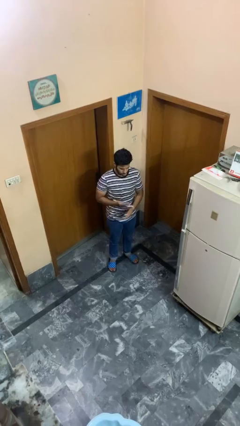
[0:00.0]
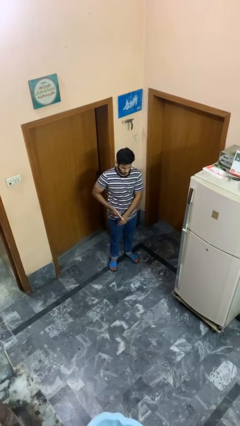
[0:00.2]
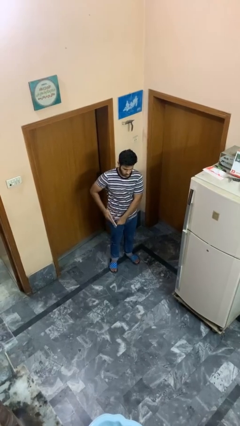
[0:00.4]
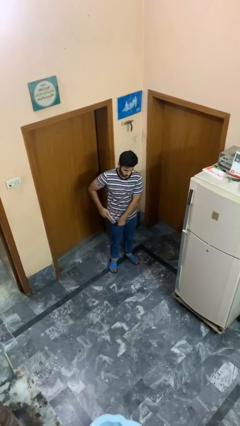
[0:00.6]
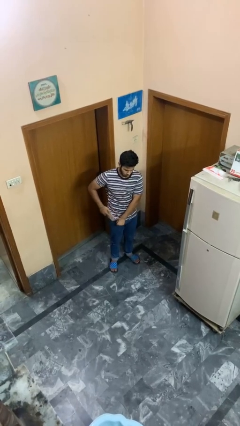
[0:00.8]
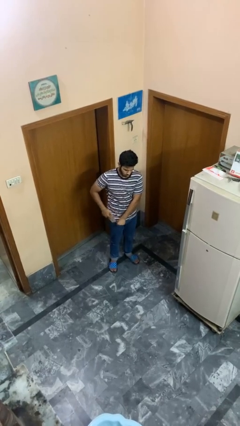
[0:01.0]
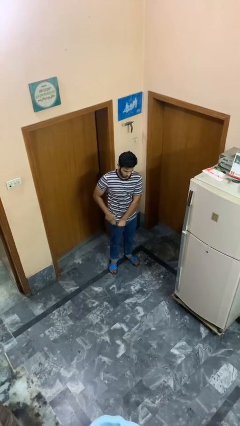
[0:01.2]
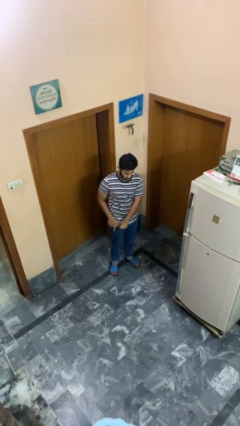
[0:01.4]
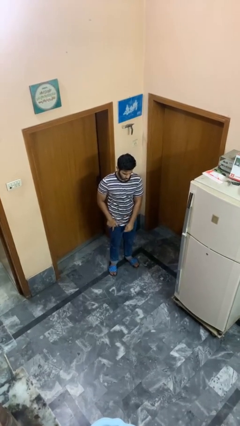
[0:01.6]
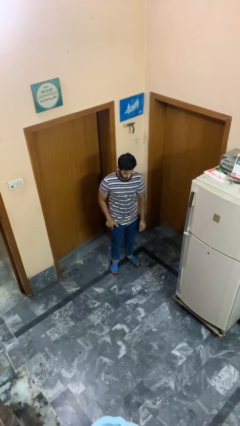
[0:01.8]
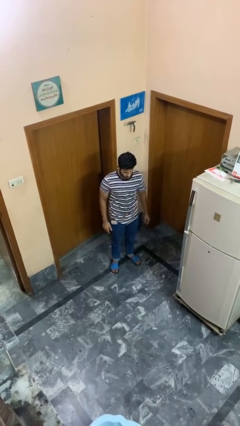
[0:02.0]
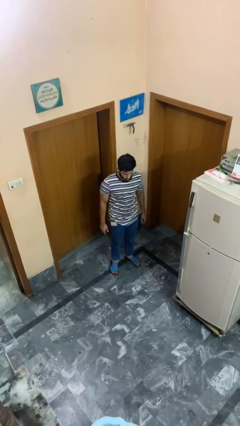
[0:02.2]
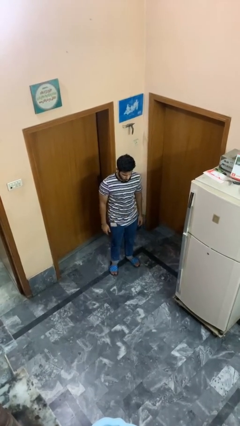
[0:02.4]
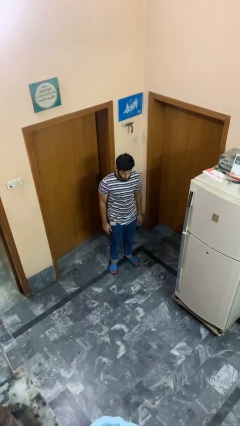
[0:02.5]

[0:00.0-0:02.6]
person puts phone into pocket

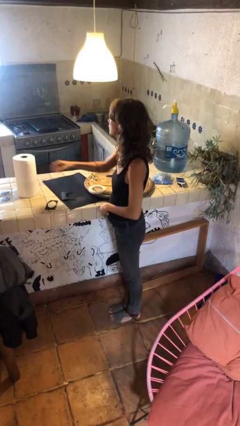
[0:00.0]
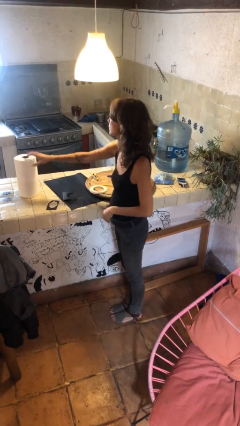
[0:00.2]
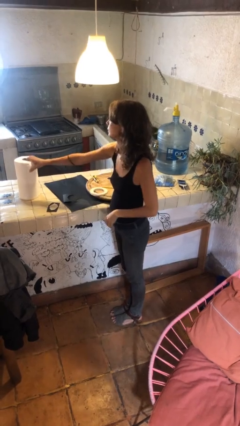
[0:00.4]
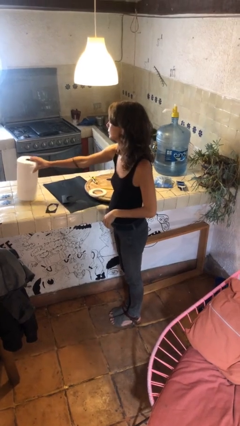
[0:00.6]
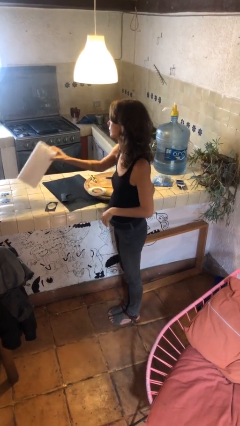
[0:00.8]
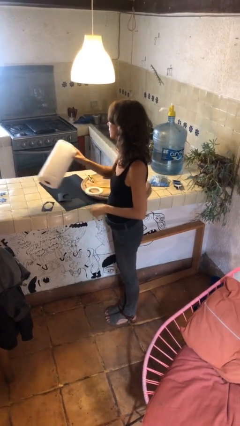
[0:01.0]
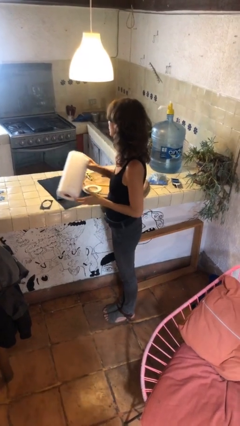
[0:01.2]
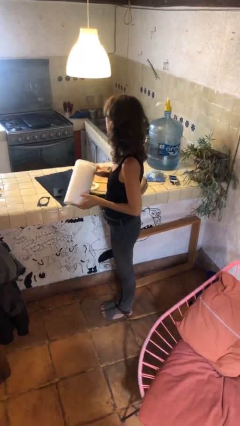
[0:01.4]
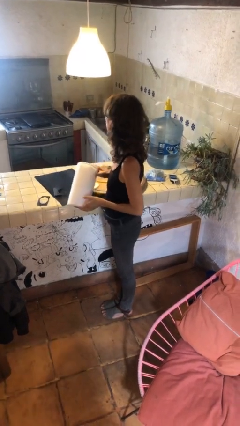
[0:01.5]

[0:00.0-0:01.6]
person picks up object from countertop

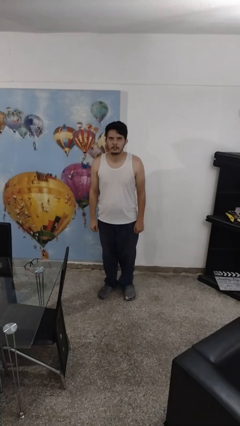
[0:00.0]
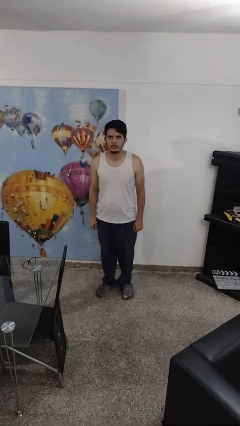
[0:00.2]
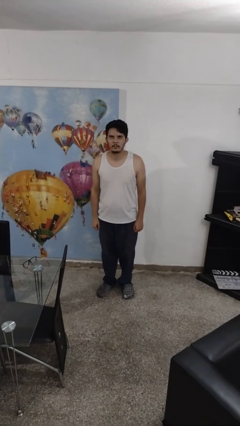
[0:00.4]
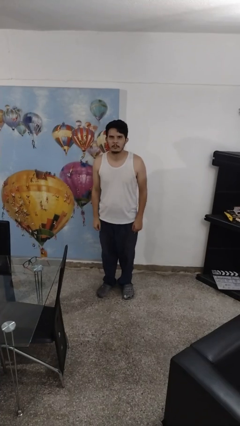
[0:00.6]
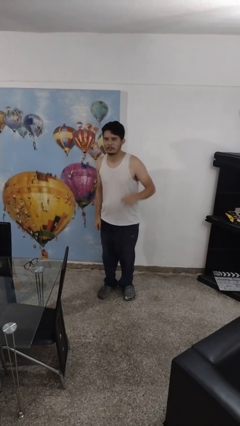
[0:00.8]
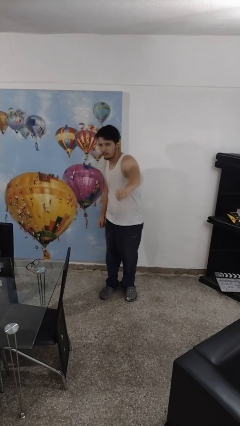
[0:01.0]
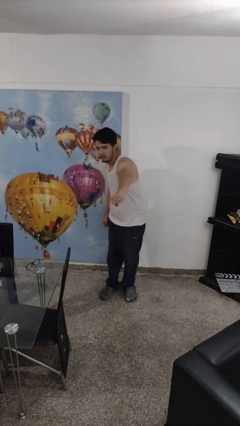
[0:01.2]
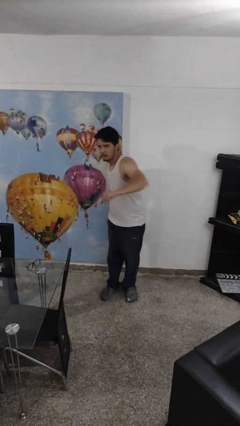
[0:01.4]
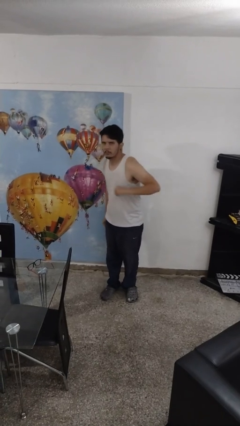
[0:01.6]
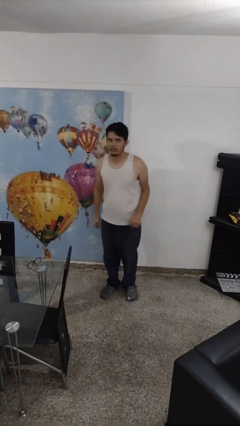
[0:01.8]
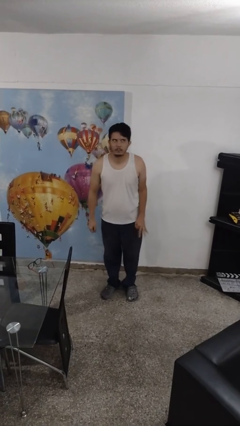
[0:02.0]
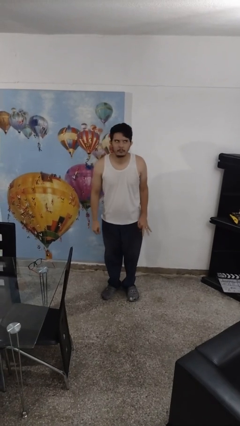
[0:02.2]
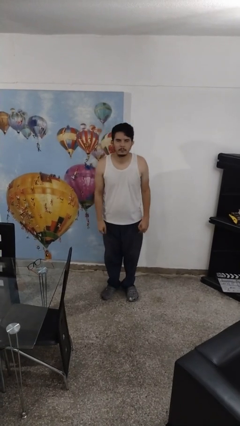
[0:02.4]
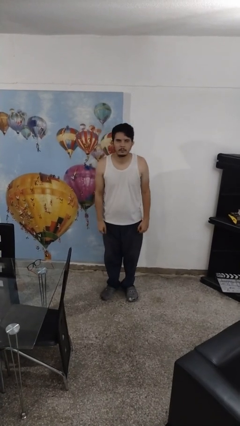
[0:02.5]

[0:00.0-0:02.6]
person karate chop

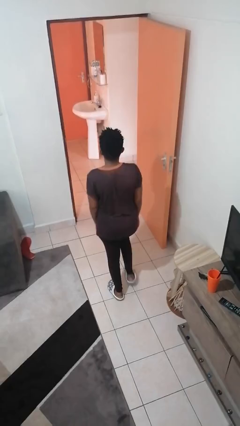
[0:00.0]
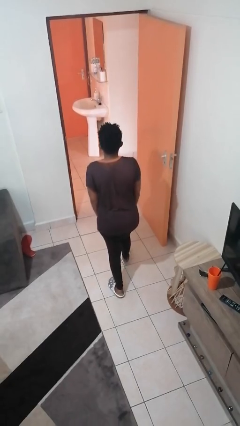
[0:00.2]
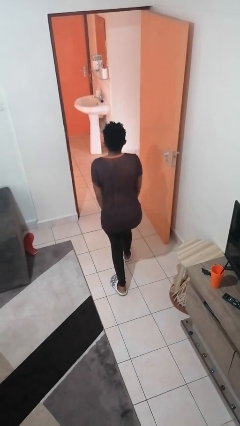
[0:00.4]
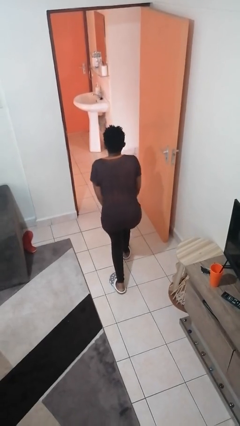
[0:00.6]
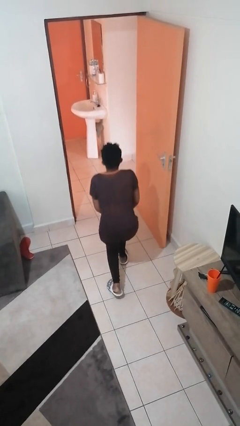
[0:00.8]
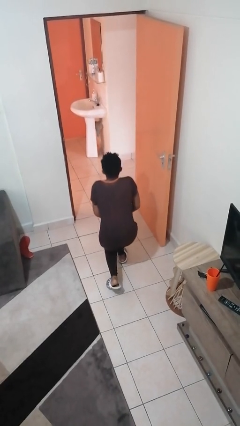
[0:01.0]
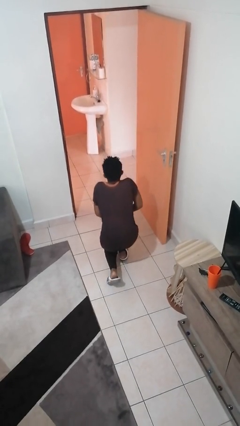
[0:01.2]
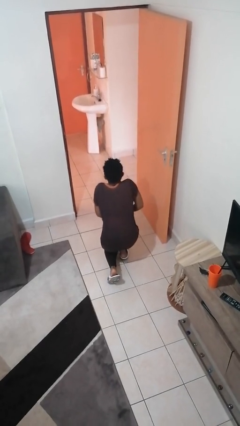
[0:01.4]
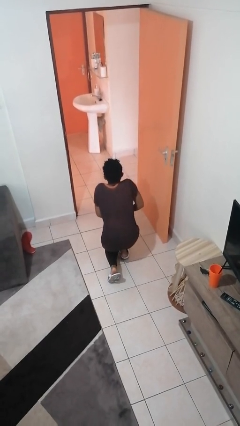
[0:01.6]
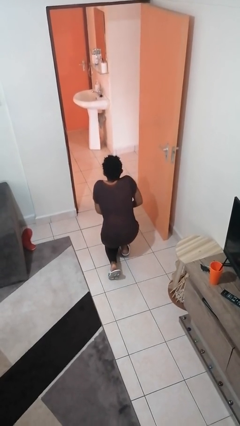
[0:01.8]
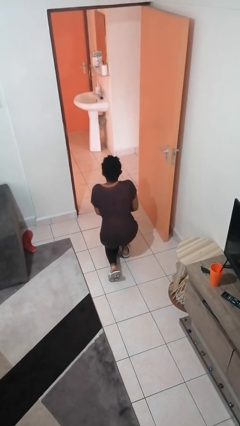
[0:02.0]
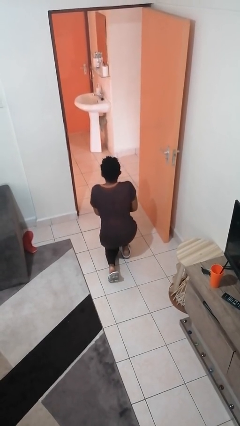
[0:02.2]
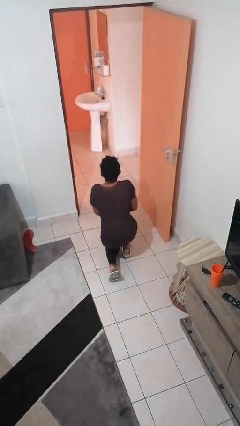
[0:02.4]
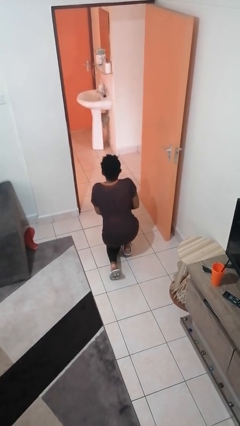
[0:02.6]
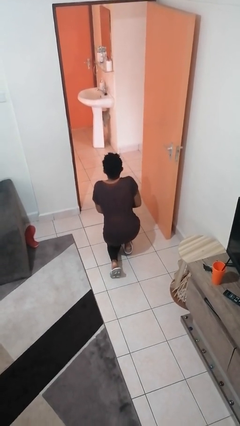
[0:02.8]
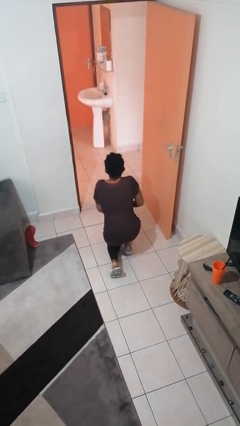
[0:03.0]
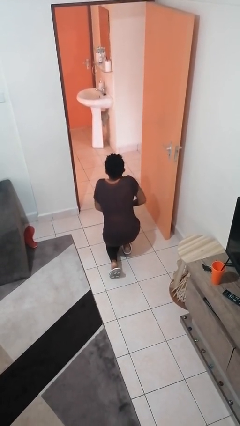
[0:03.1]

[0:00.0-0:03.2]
person kneels

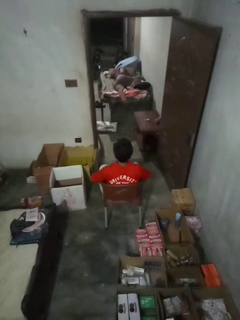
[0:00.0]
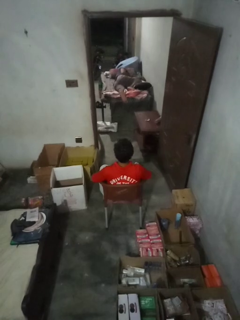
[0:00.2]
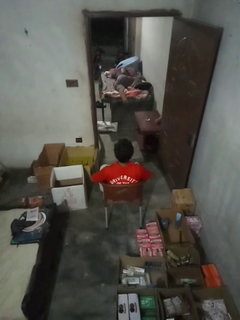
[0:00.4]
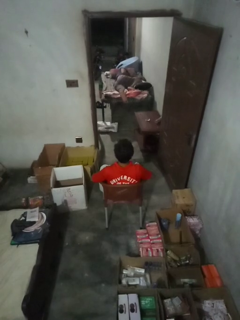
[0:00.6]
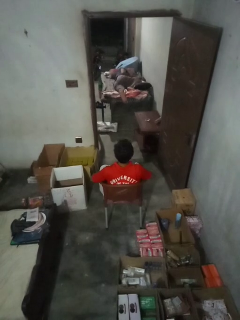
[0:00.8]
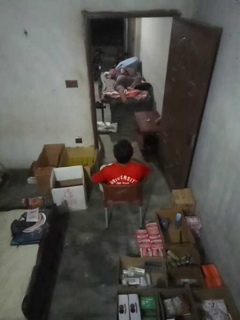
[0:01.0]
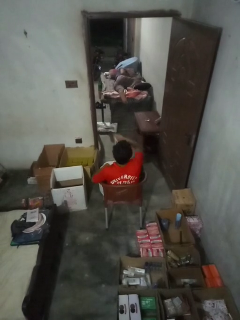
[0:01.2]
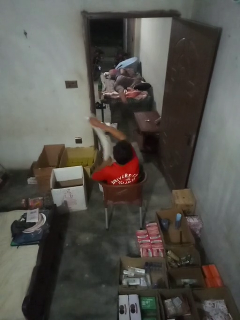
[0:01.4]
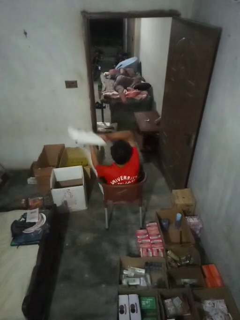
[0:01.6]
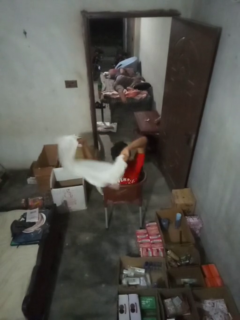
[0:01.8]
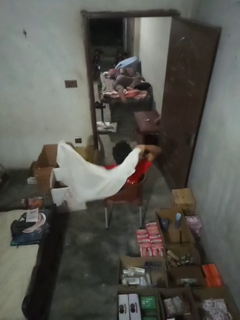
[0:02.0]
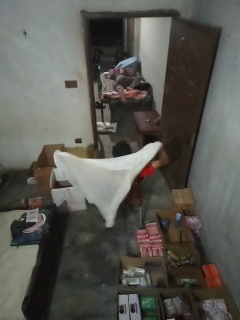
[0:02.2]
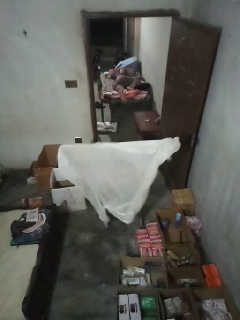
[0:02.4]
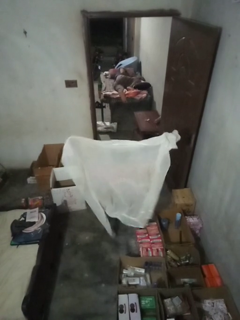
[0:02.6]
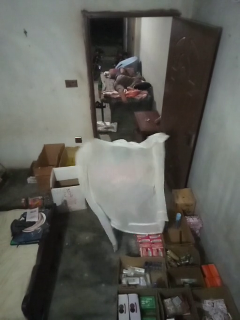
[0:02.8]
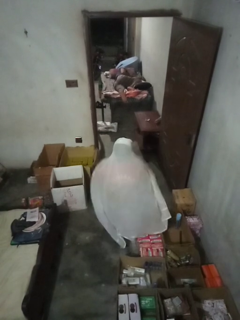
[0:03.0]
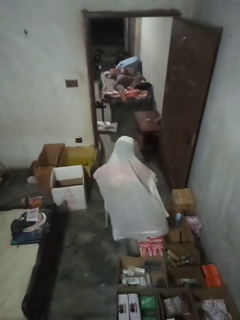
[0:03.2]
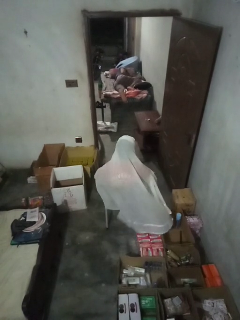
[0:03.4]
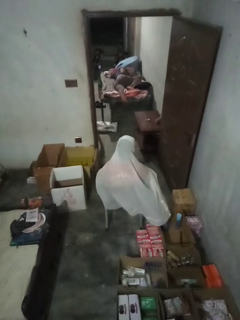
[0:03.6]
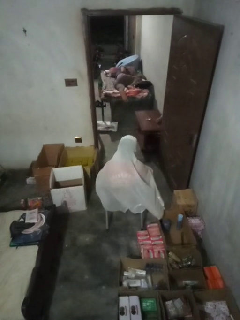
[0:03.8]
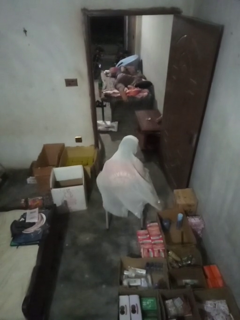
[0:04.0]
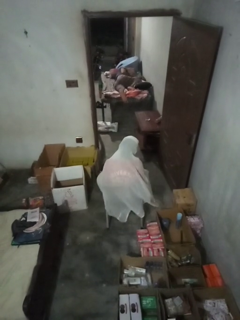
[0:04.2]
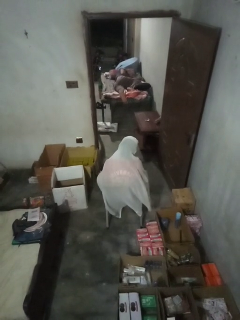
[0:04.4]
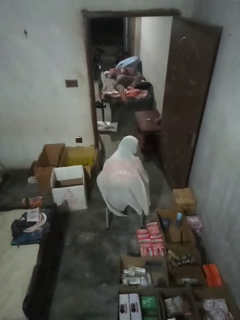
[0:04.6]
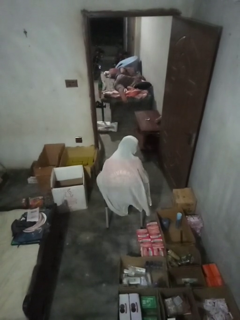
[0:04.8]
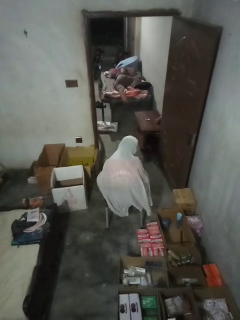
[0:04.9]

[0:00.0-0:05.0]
person covers with blanket

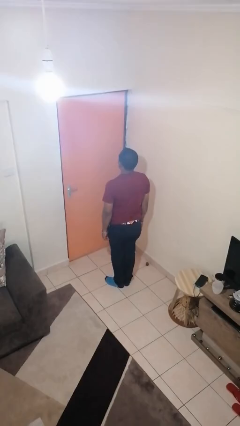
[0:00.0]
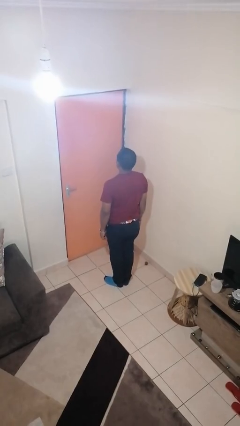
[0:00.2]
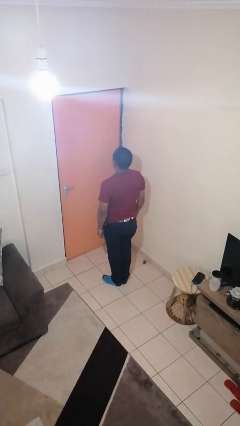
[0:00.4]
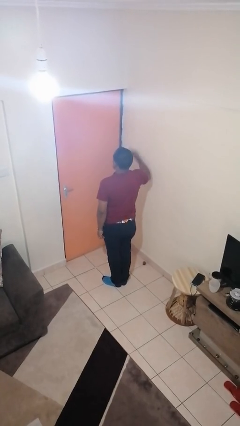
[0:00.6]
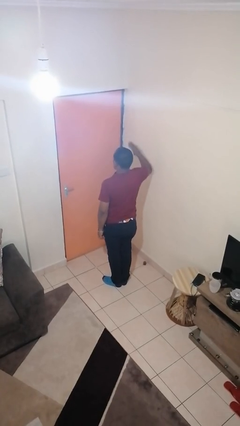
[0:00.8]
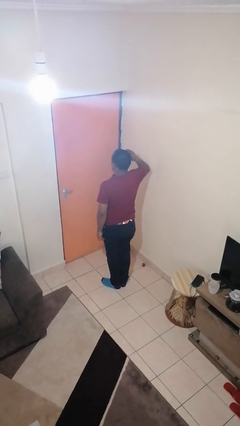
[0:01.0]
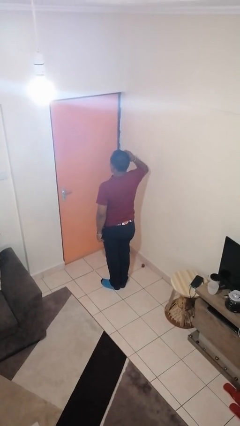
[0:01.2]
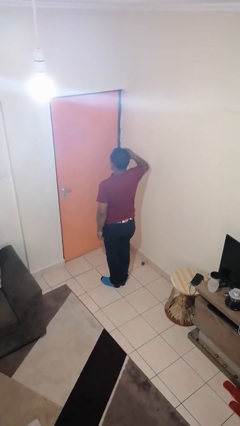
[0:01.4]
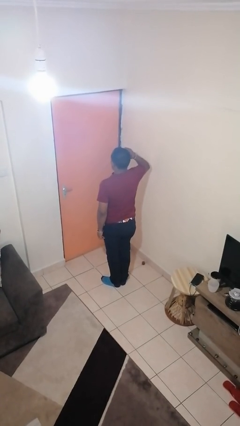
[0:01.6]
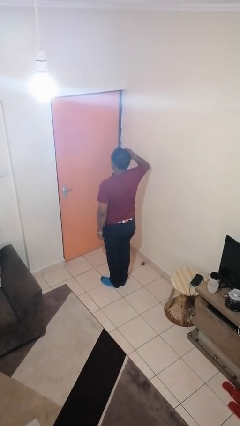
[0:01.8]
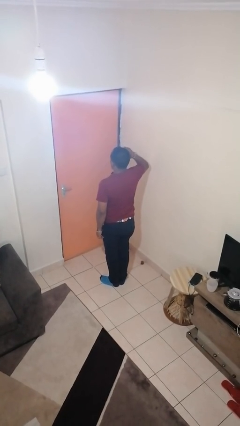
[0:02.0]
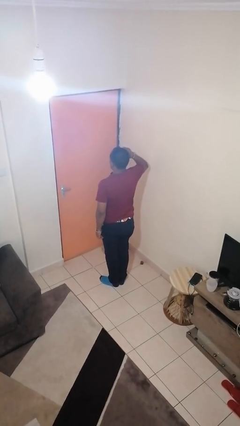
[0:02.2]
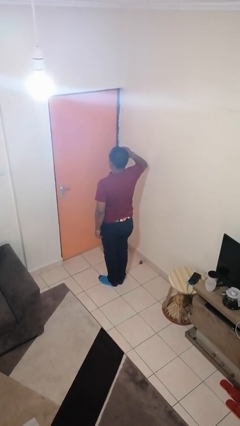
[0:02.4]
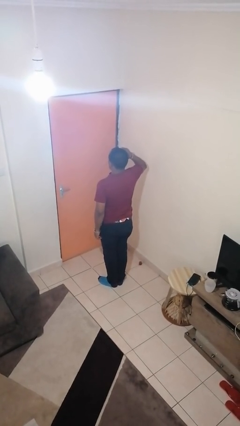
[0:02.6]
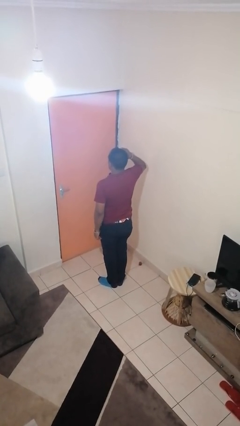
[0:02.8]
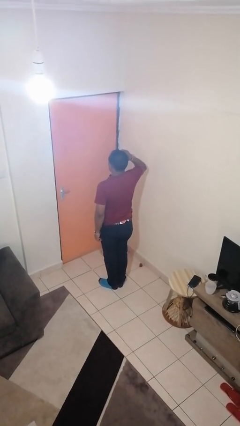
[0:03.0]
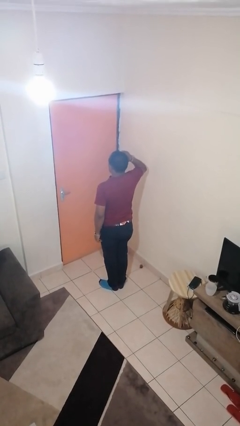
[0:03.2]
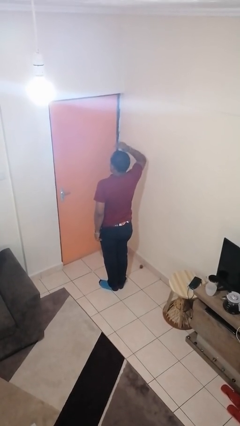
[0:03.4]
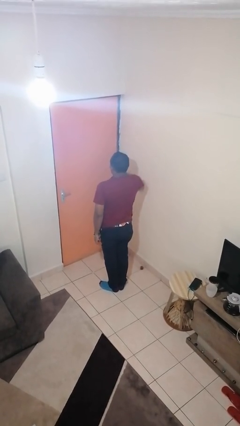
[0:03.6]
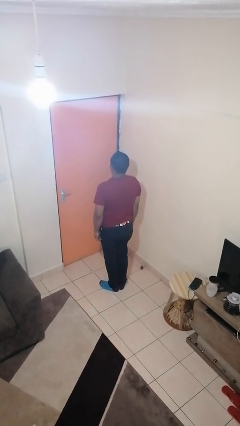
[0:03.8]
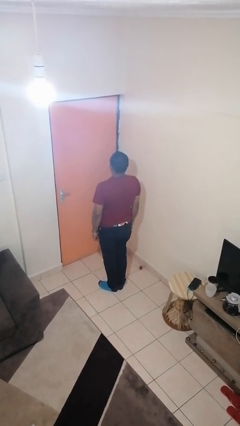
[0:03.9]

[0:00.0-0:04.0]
person salutes
